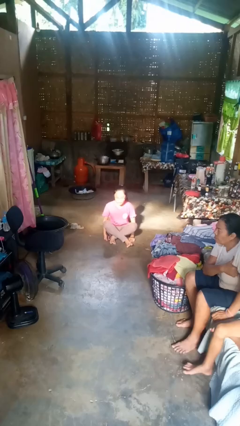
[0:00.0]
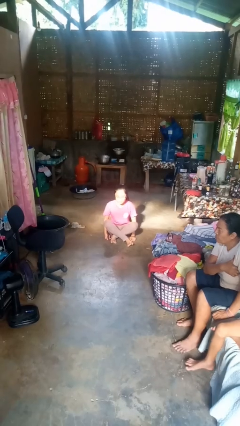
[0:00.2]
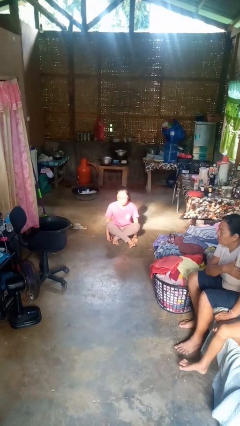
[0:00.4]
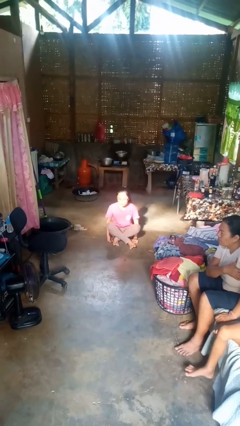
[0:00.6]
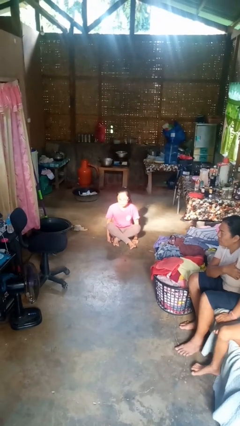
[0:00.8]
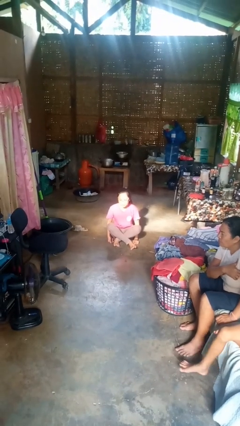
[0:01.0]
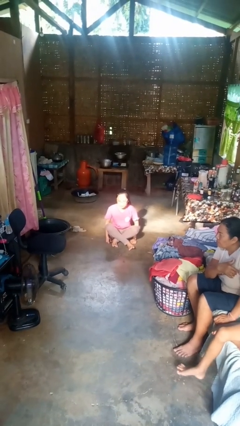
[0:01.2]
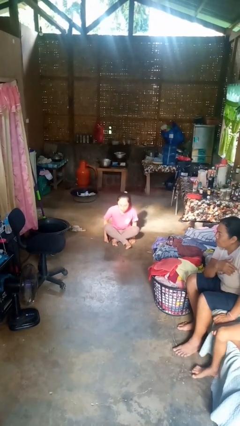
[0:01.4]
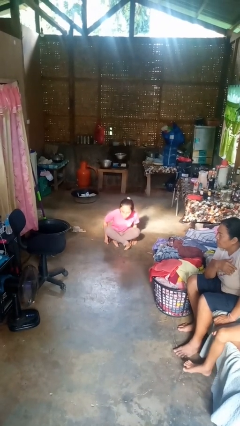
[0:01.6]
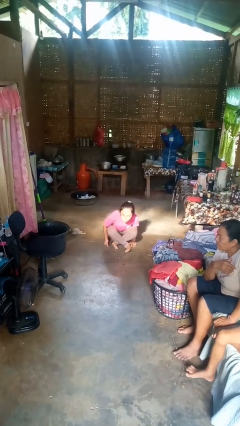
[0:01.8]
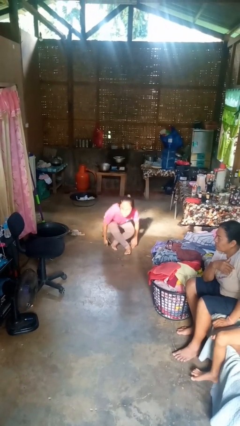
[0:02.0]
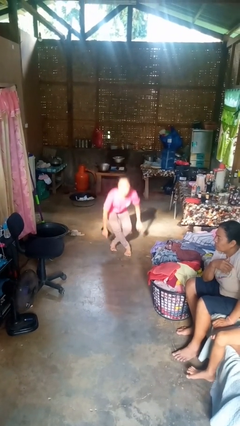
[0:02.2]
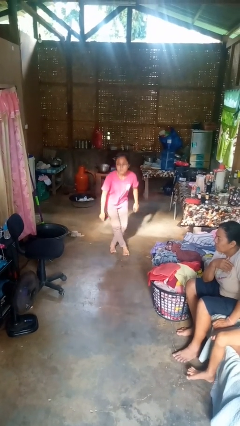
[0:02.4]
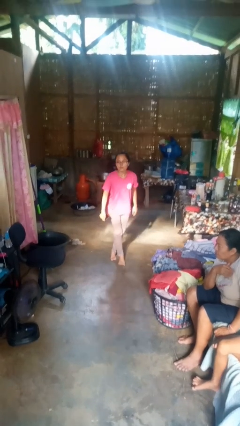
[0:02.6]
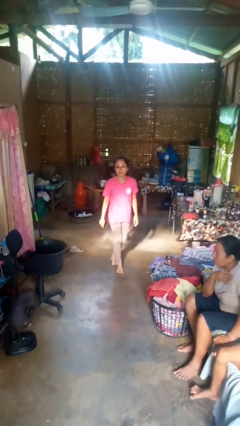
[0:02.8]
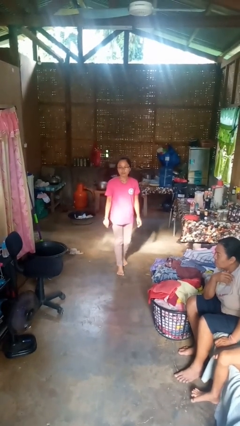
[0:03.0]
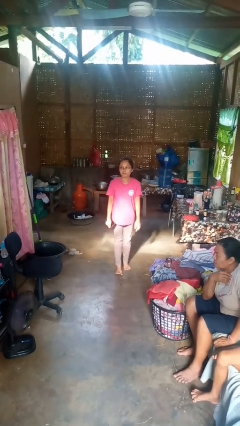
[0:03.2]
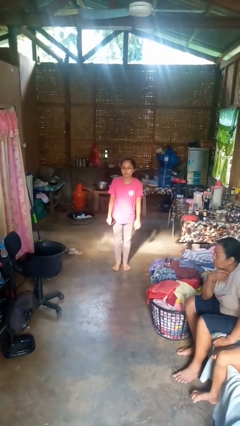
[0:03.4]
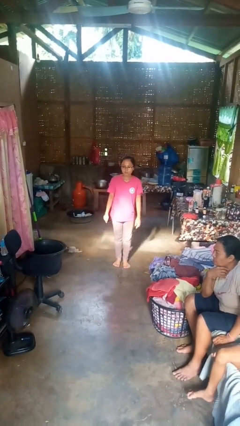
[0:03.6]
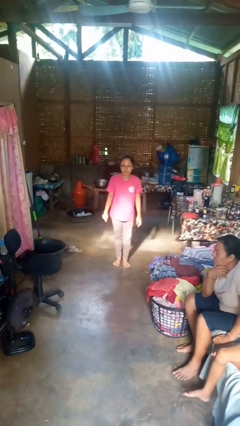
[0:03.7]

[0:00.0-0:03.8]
person stands up from floor

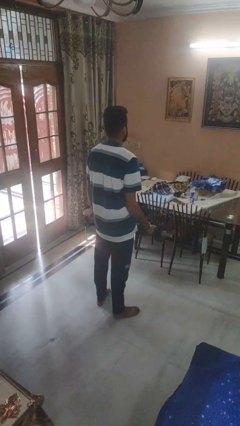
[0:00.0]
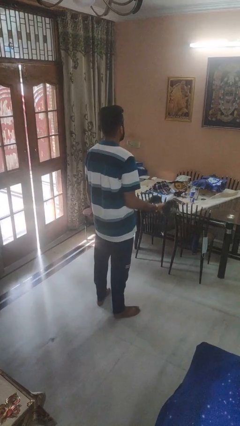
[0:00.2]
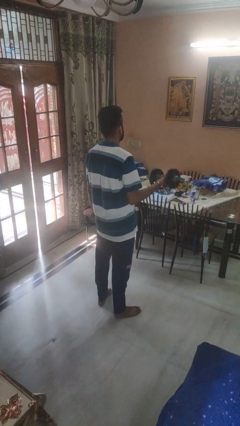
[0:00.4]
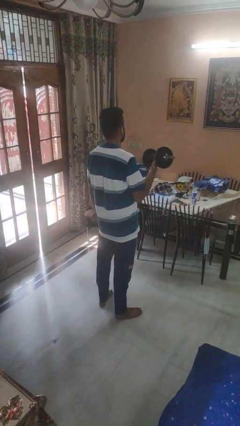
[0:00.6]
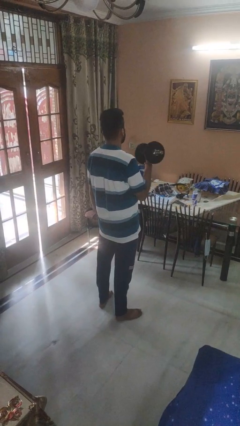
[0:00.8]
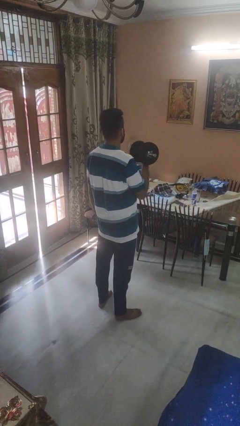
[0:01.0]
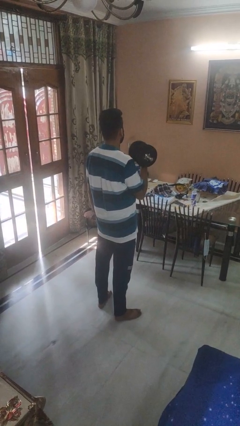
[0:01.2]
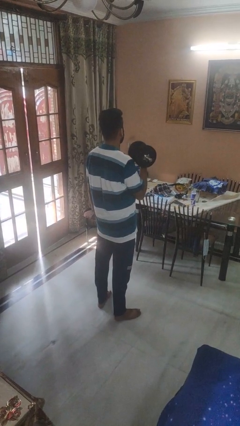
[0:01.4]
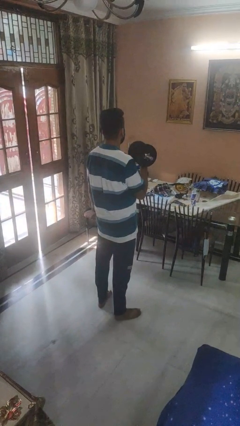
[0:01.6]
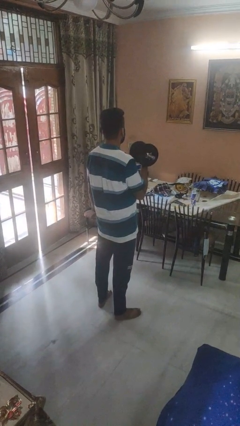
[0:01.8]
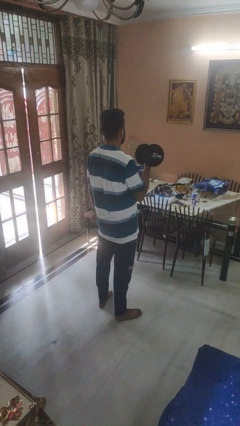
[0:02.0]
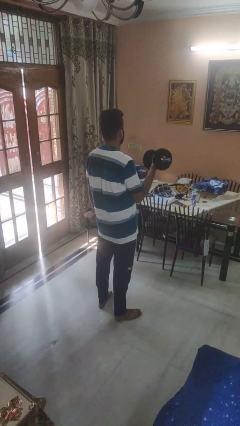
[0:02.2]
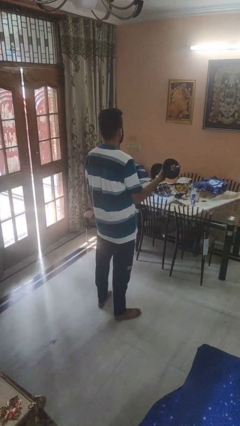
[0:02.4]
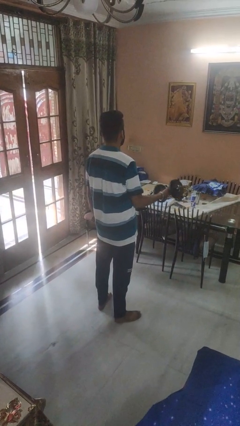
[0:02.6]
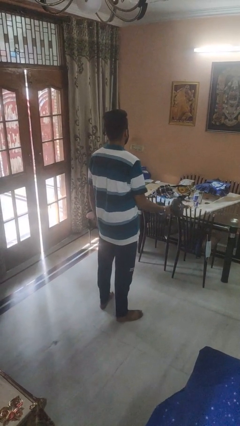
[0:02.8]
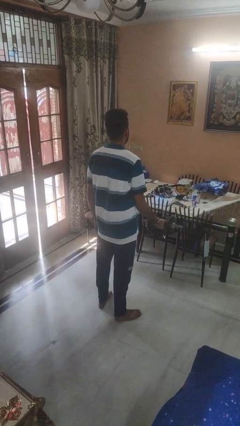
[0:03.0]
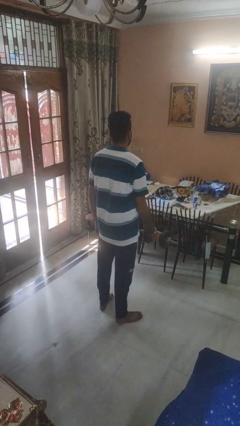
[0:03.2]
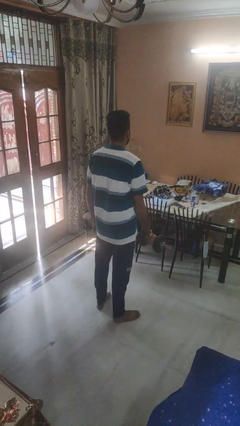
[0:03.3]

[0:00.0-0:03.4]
person lifts dumbbells

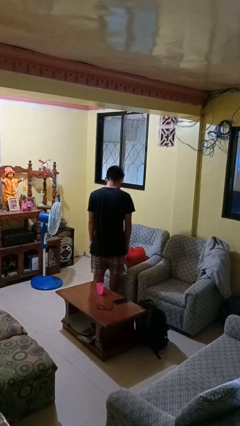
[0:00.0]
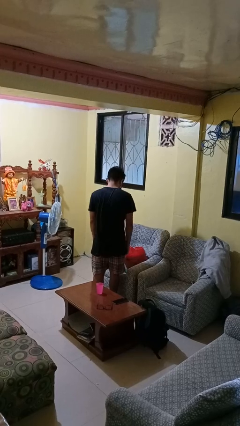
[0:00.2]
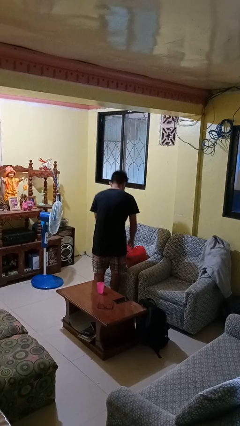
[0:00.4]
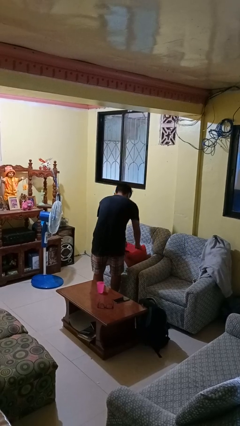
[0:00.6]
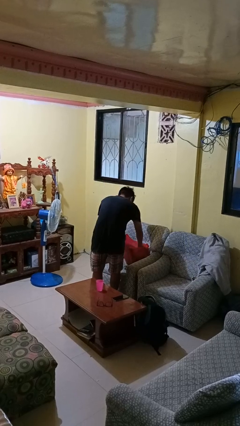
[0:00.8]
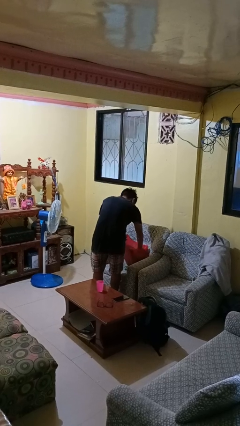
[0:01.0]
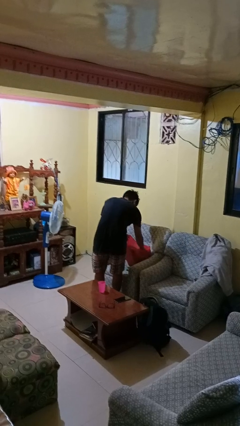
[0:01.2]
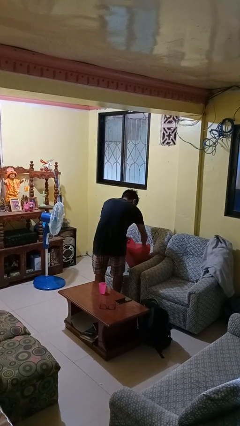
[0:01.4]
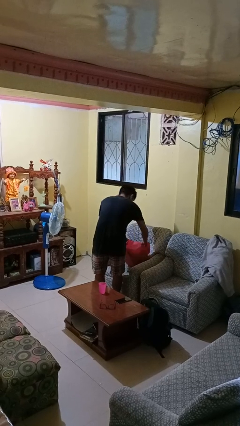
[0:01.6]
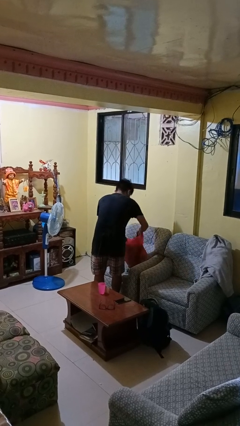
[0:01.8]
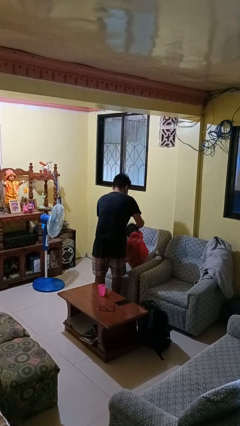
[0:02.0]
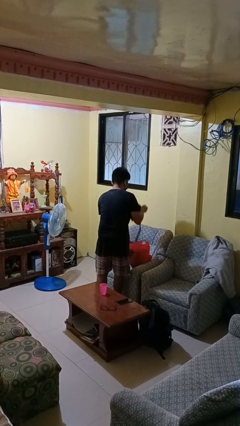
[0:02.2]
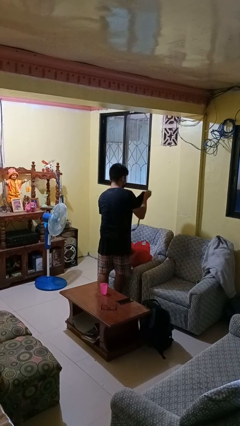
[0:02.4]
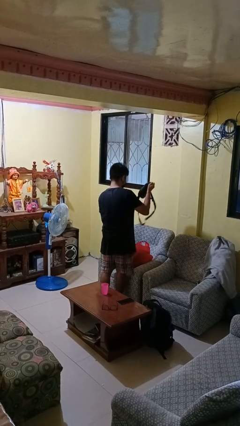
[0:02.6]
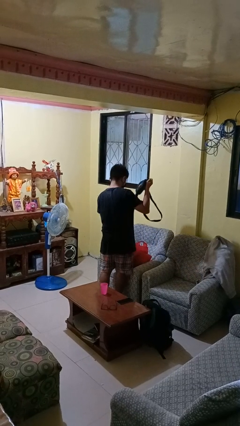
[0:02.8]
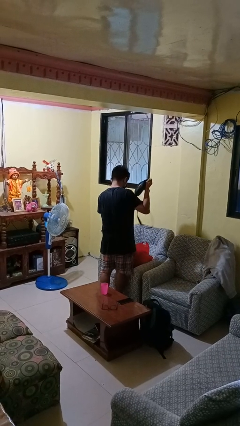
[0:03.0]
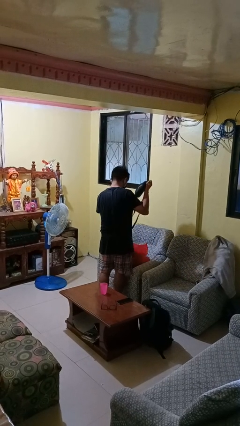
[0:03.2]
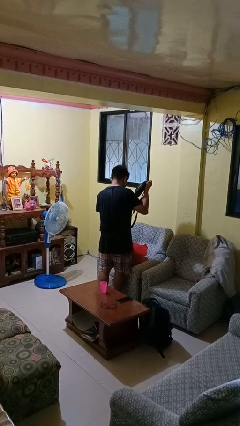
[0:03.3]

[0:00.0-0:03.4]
person takes object from bag

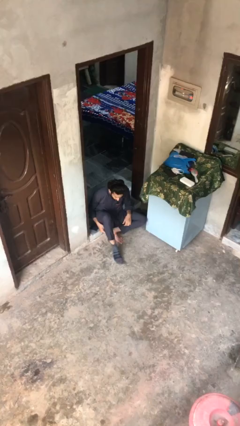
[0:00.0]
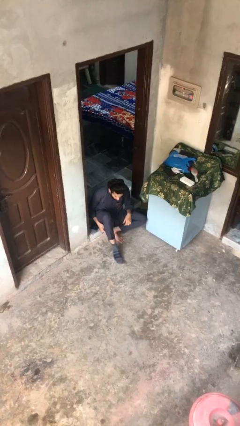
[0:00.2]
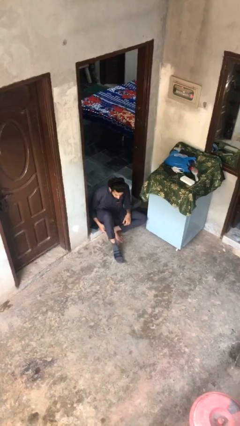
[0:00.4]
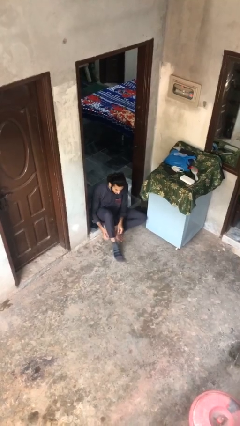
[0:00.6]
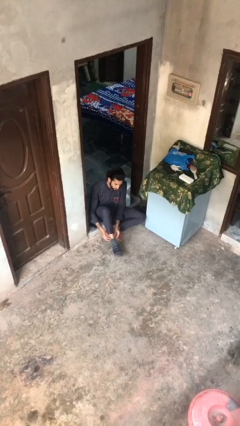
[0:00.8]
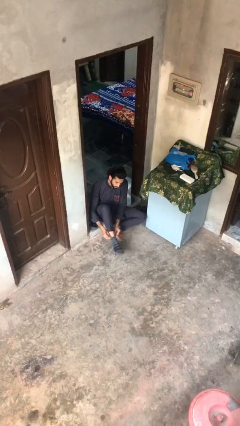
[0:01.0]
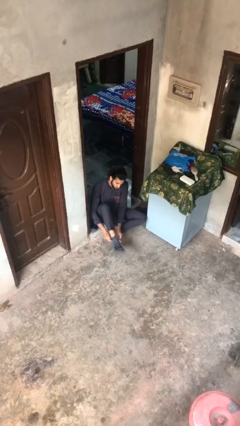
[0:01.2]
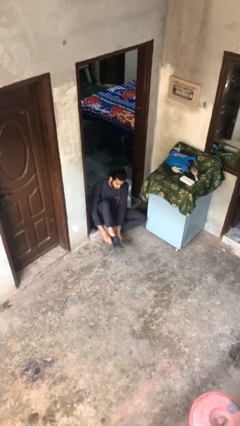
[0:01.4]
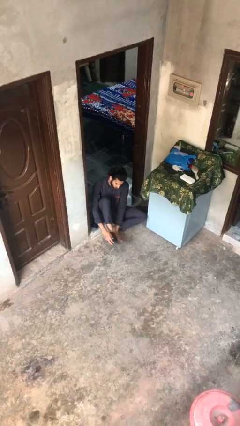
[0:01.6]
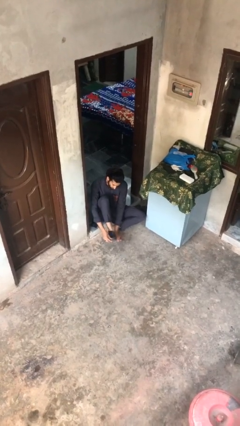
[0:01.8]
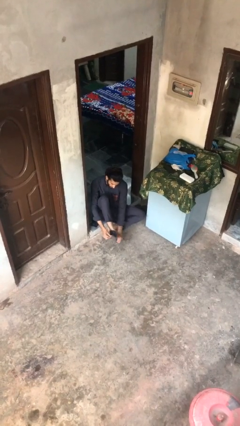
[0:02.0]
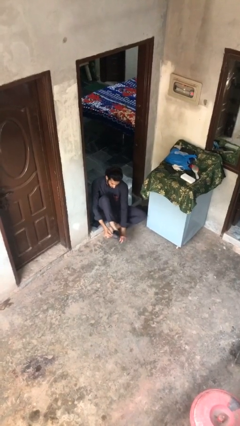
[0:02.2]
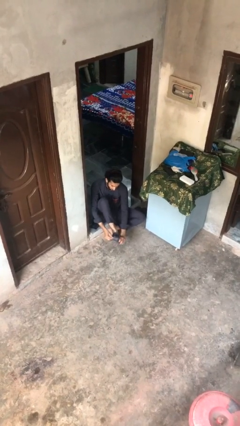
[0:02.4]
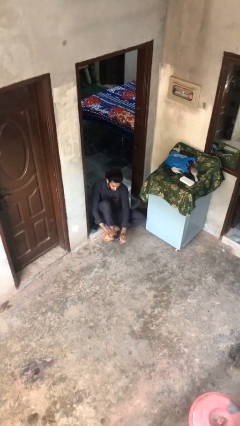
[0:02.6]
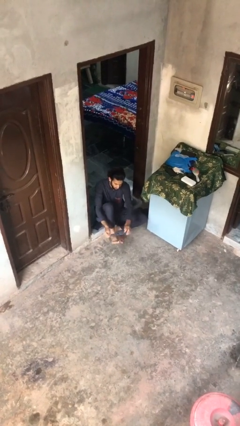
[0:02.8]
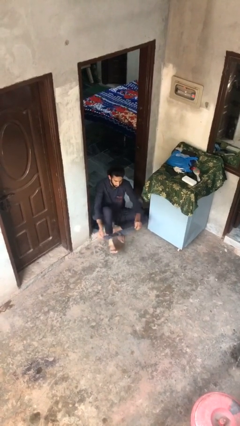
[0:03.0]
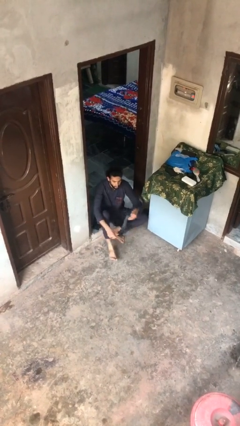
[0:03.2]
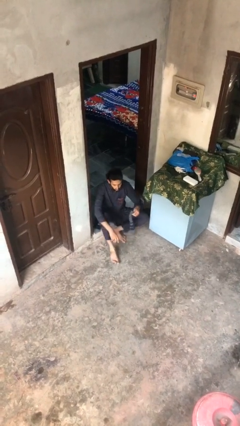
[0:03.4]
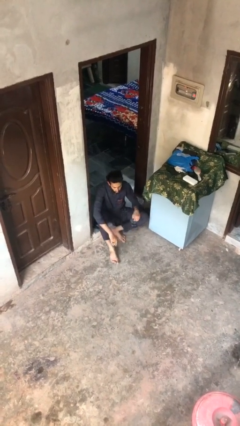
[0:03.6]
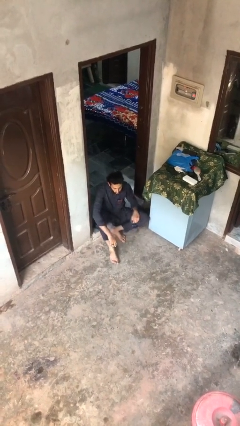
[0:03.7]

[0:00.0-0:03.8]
person takes off socks

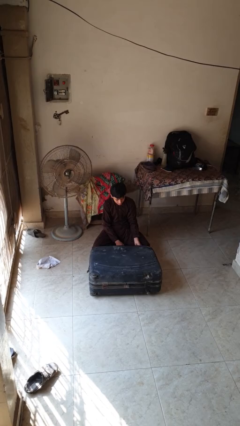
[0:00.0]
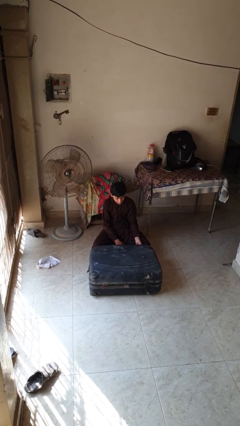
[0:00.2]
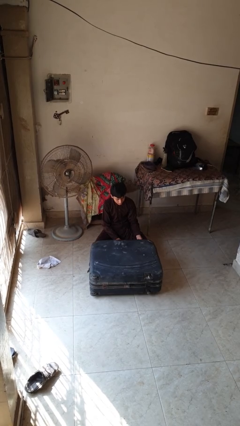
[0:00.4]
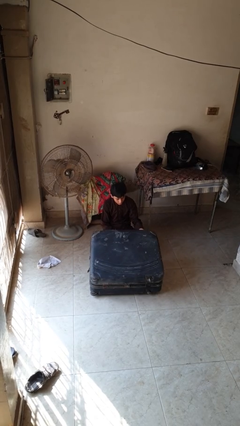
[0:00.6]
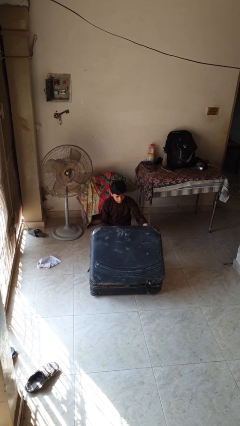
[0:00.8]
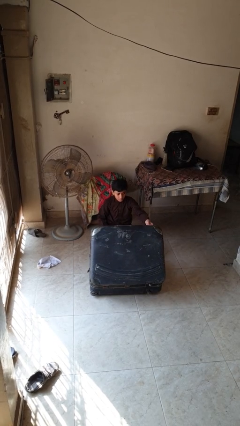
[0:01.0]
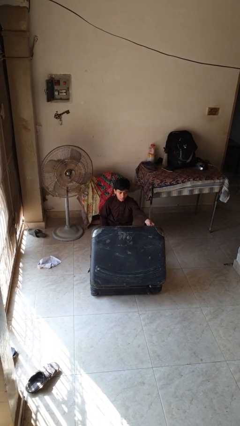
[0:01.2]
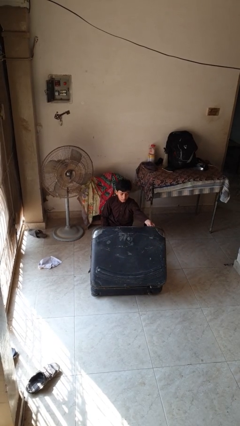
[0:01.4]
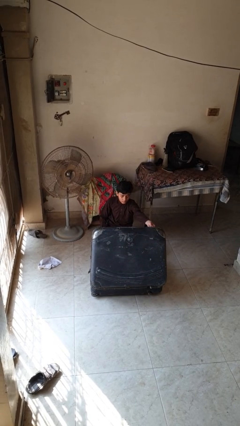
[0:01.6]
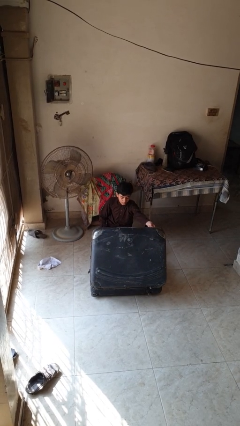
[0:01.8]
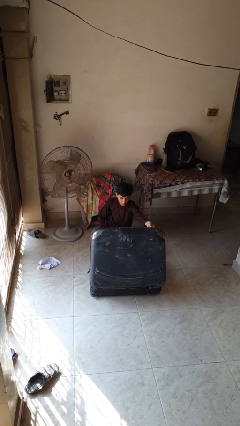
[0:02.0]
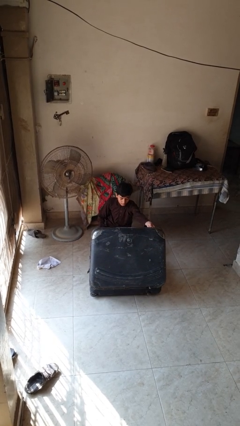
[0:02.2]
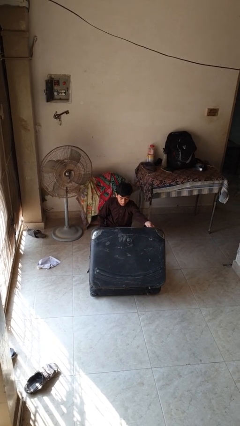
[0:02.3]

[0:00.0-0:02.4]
person opens suitcase

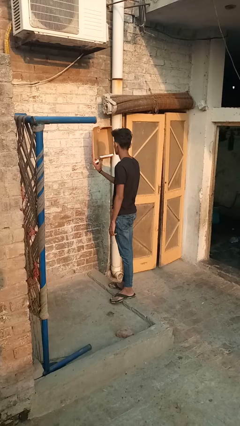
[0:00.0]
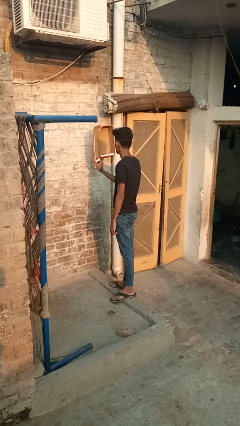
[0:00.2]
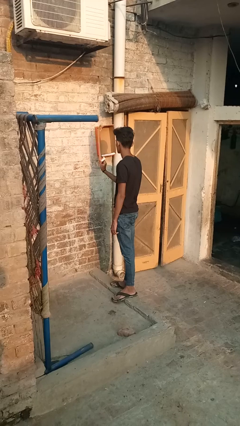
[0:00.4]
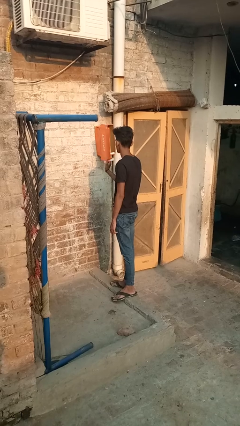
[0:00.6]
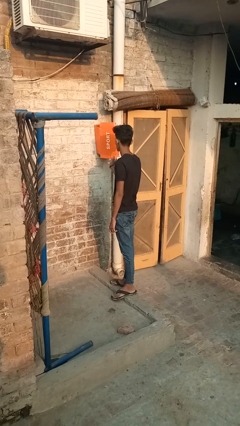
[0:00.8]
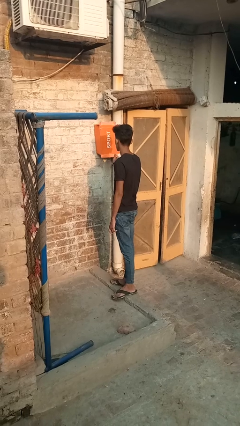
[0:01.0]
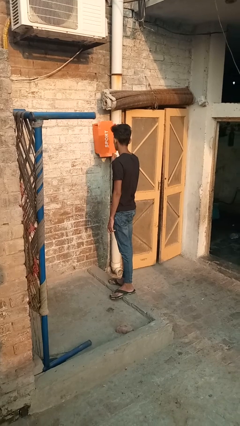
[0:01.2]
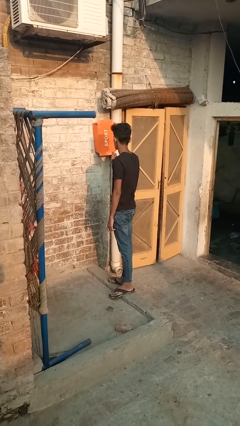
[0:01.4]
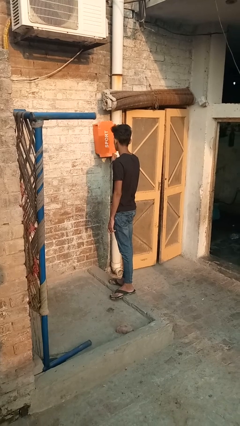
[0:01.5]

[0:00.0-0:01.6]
person opens mailbox
